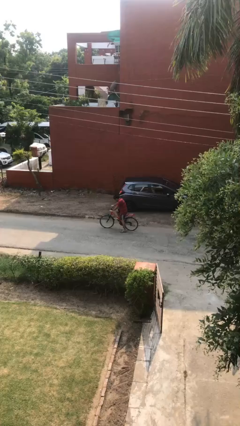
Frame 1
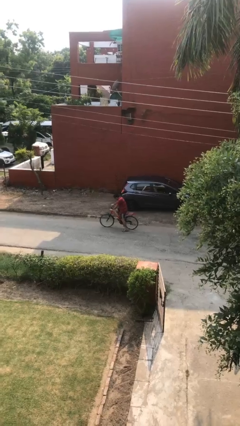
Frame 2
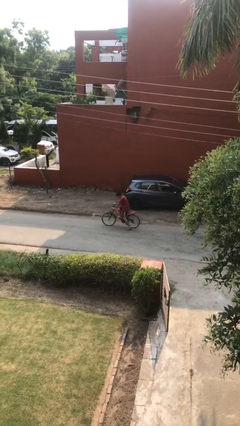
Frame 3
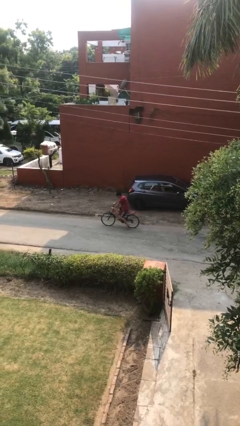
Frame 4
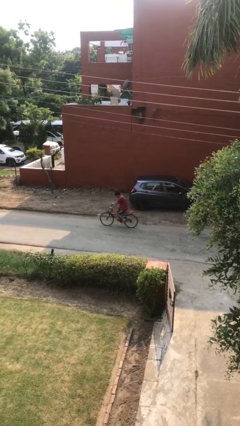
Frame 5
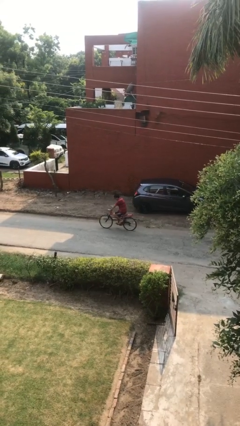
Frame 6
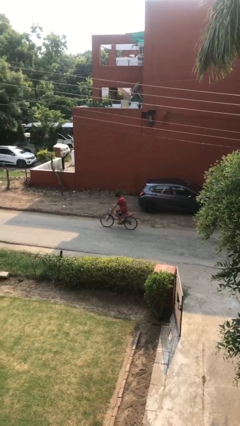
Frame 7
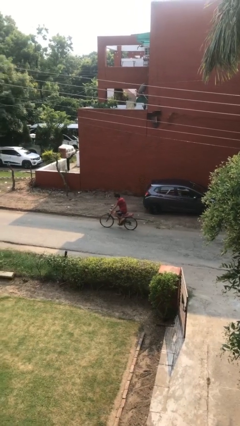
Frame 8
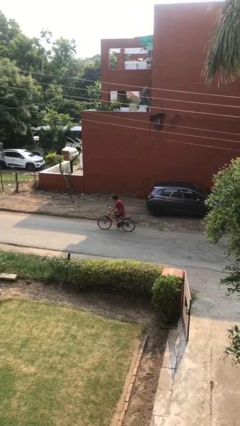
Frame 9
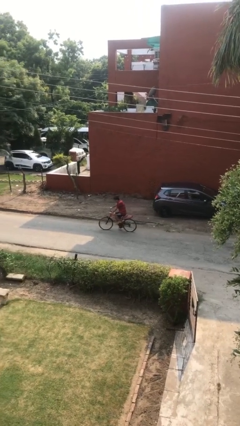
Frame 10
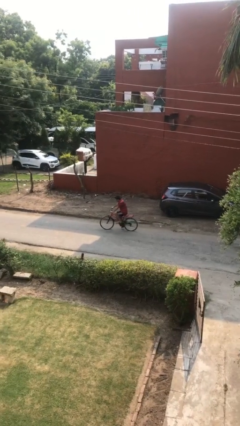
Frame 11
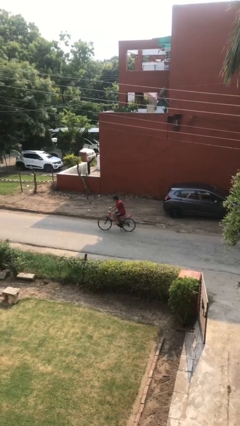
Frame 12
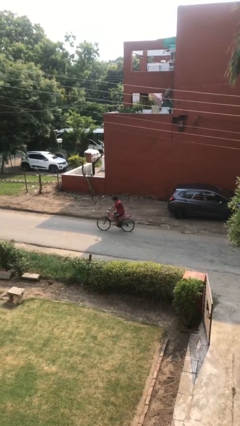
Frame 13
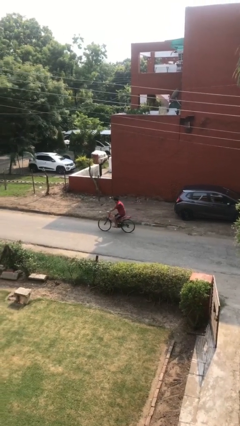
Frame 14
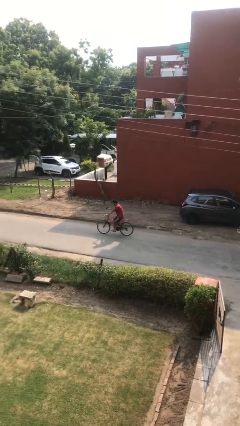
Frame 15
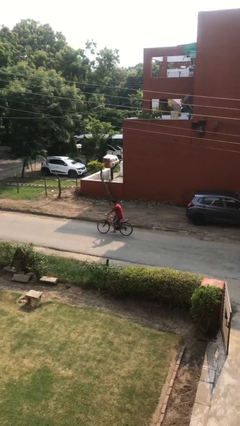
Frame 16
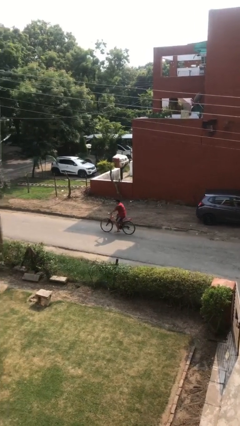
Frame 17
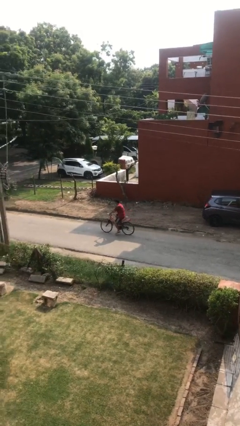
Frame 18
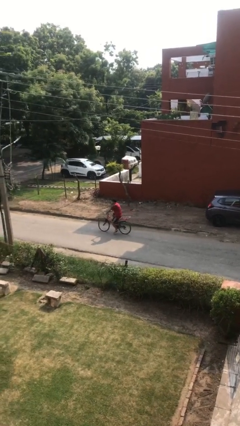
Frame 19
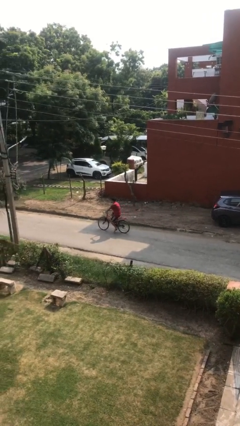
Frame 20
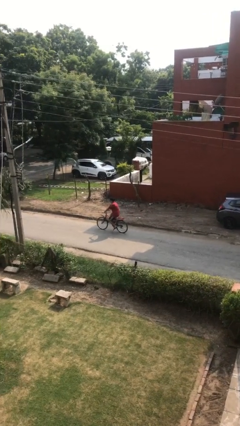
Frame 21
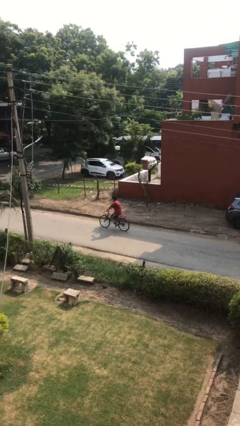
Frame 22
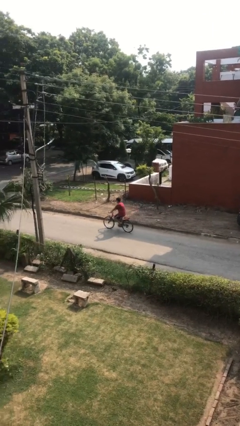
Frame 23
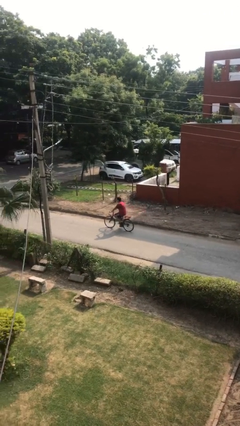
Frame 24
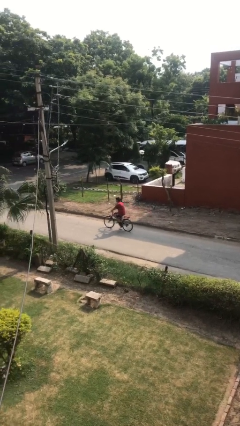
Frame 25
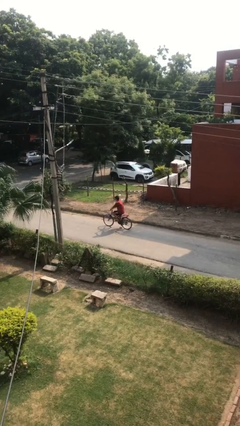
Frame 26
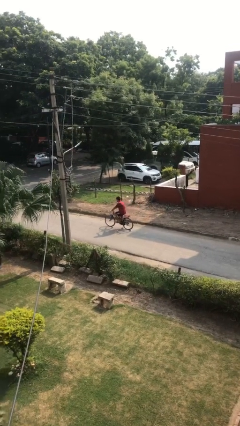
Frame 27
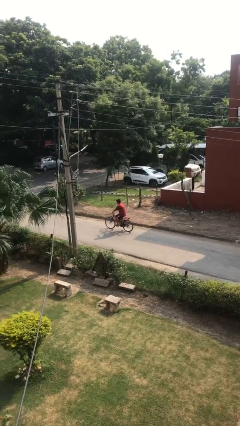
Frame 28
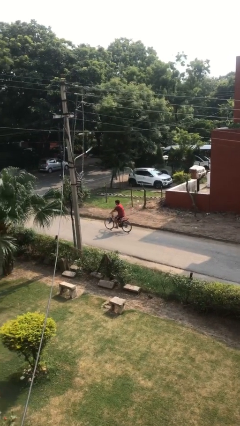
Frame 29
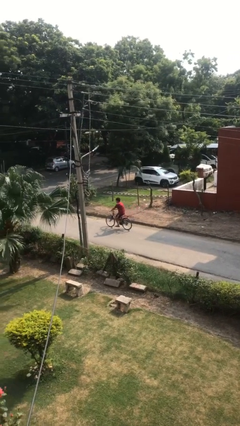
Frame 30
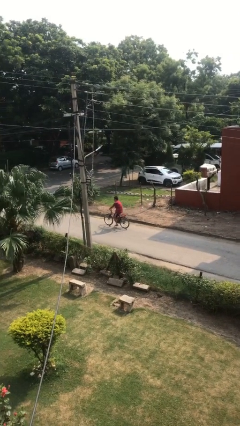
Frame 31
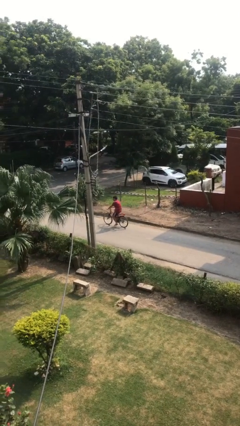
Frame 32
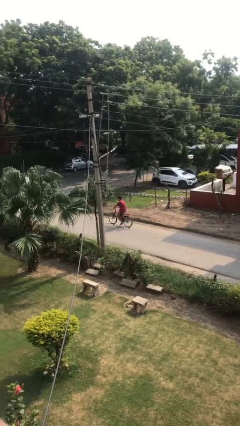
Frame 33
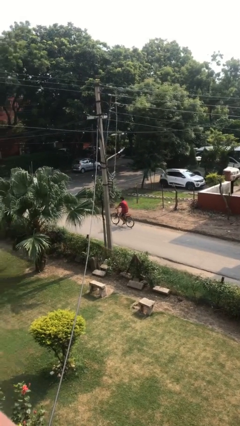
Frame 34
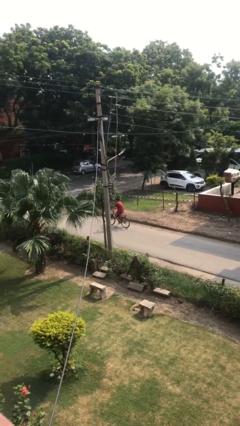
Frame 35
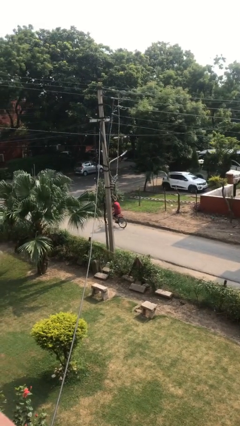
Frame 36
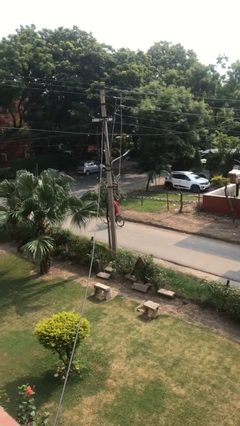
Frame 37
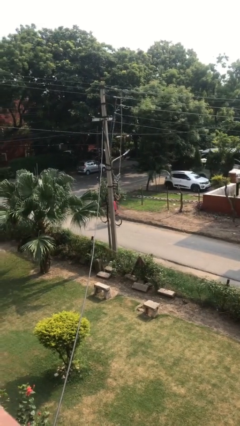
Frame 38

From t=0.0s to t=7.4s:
person rides bicycle

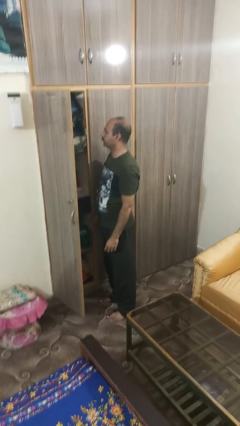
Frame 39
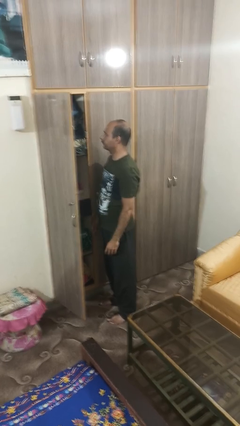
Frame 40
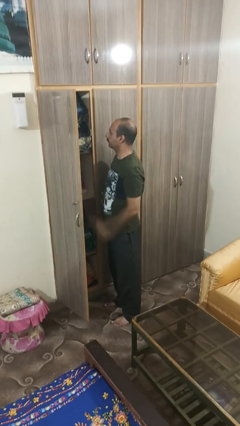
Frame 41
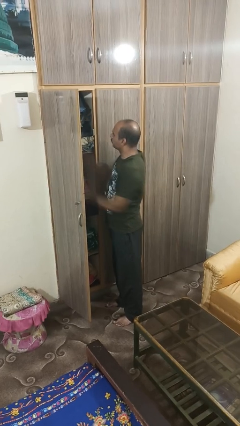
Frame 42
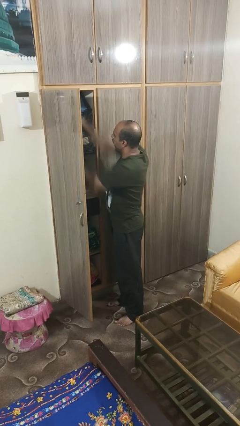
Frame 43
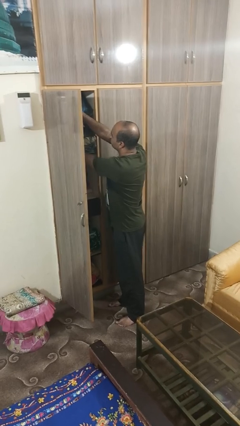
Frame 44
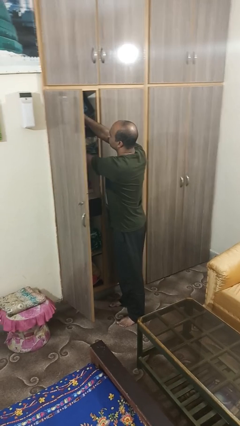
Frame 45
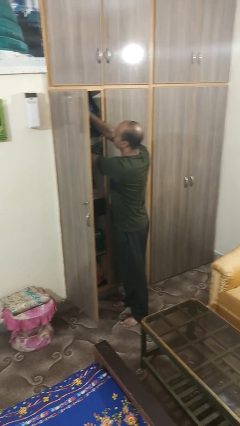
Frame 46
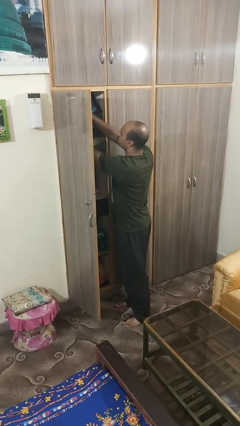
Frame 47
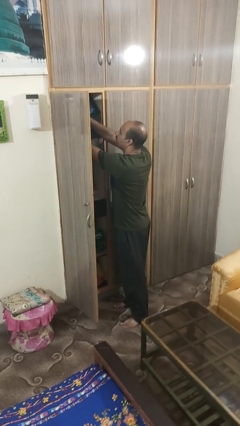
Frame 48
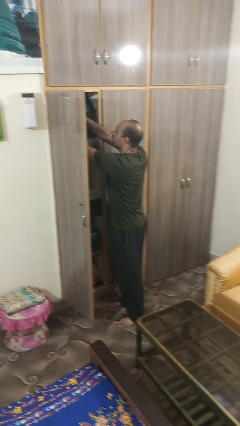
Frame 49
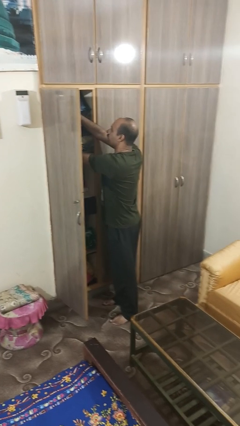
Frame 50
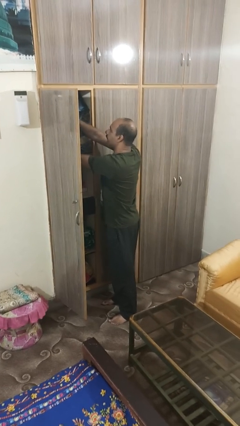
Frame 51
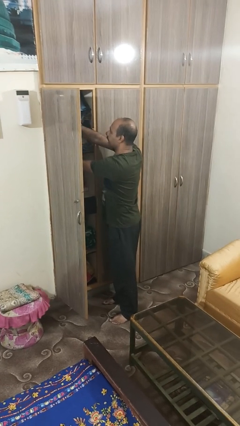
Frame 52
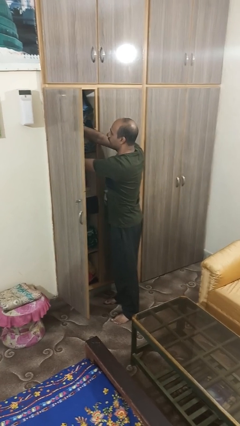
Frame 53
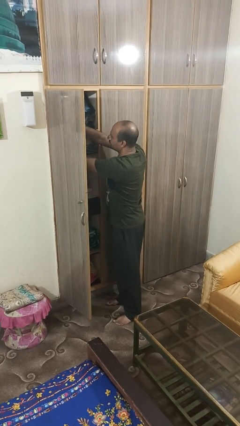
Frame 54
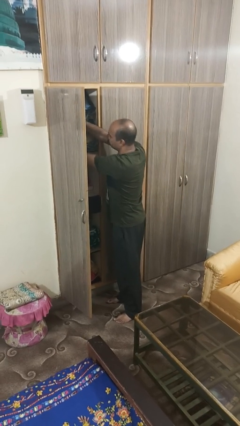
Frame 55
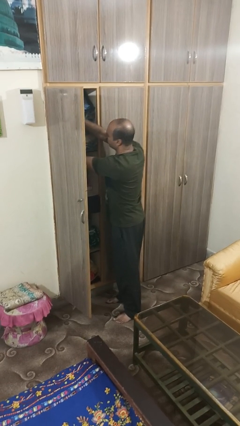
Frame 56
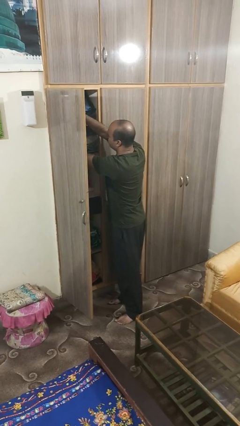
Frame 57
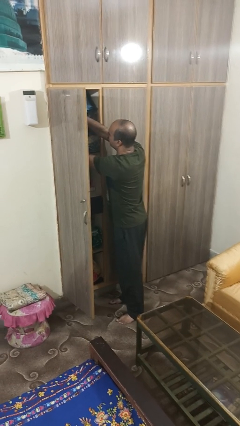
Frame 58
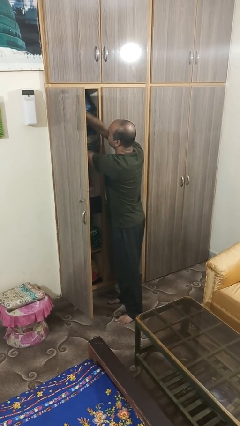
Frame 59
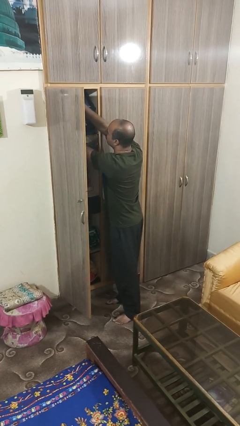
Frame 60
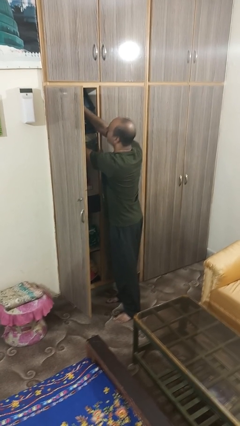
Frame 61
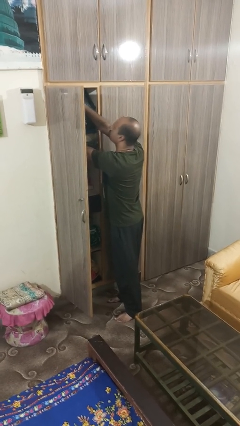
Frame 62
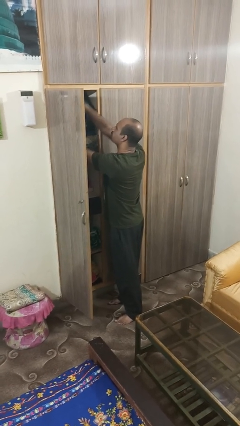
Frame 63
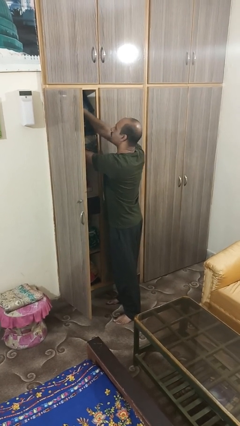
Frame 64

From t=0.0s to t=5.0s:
person searches in cabinet

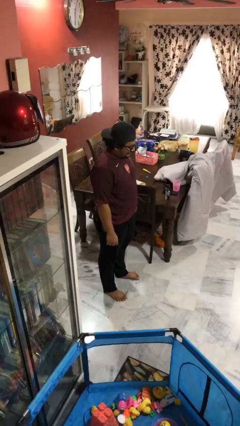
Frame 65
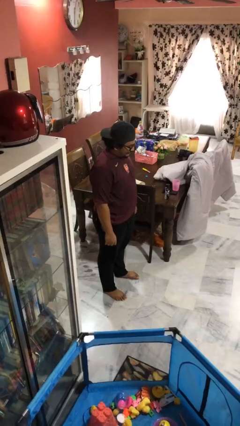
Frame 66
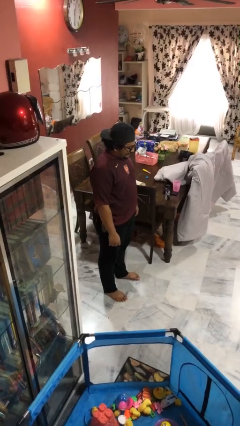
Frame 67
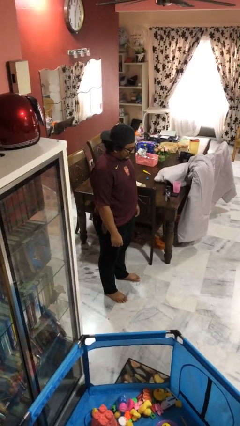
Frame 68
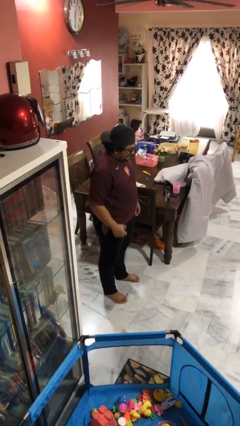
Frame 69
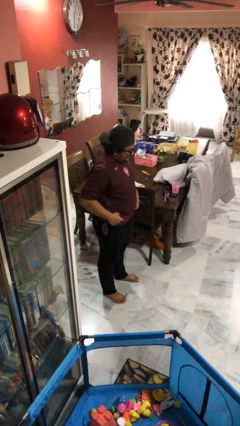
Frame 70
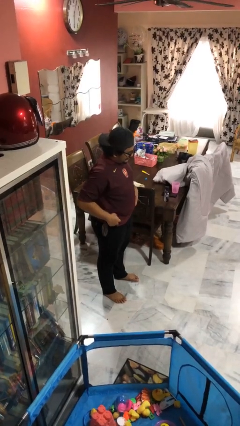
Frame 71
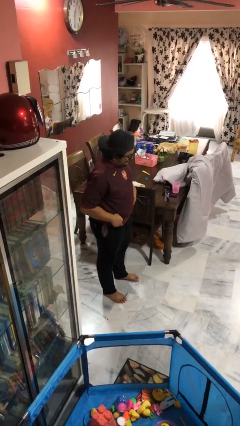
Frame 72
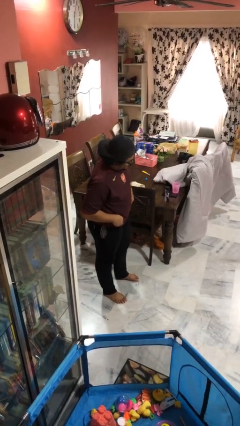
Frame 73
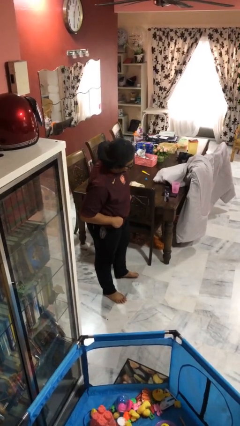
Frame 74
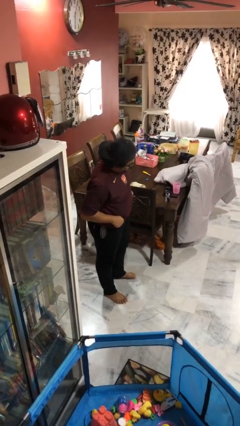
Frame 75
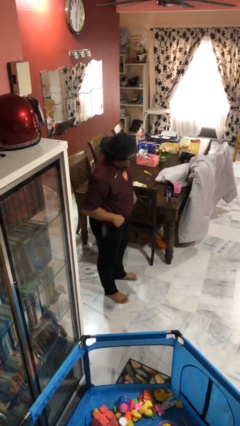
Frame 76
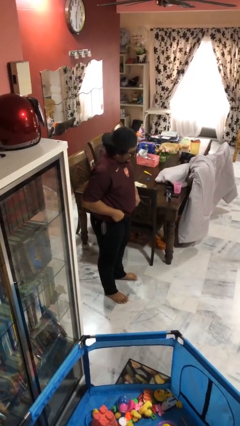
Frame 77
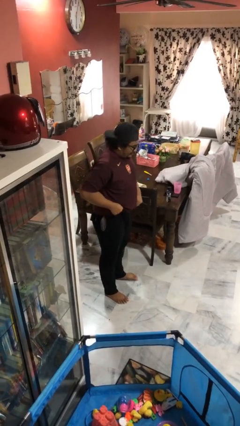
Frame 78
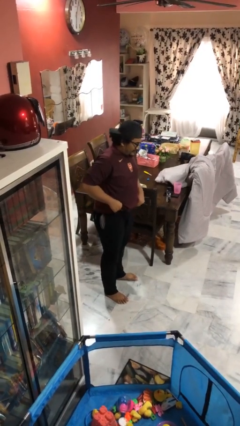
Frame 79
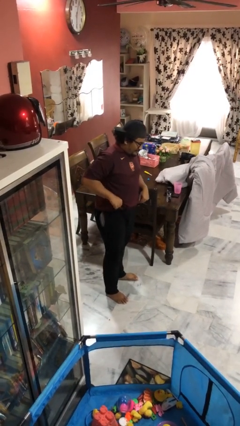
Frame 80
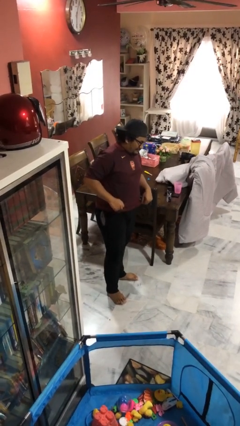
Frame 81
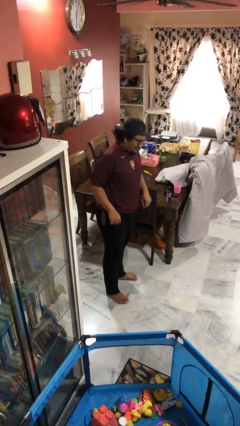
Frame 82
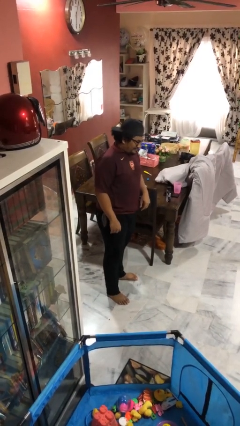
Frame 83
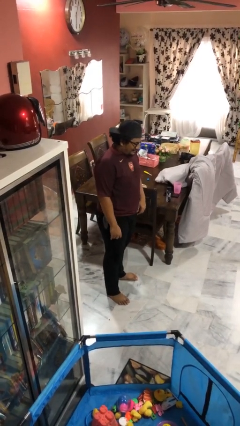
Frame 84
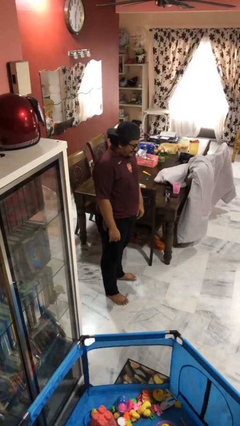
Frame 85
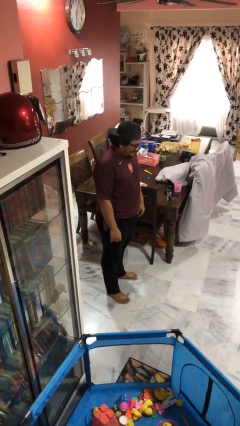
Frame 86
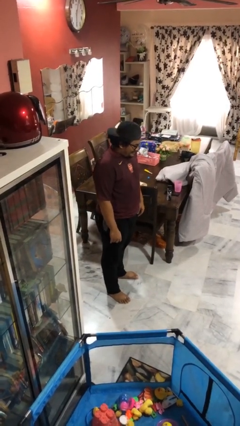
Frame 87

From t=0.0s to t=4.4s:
person hikes up pants

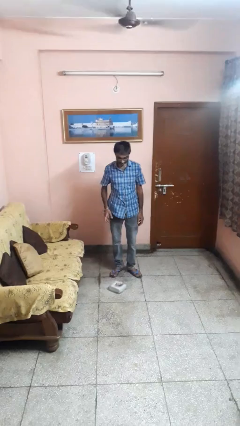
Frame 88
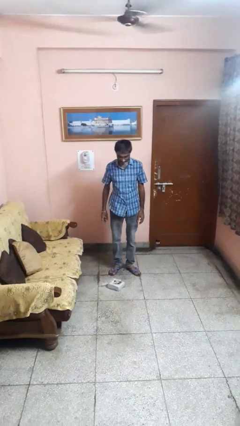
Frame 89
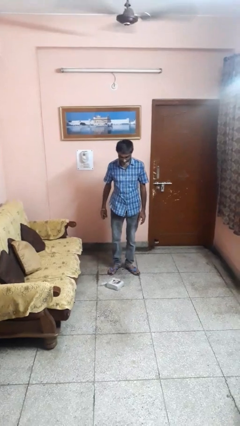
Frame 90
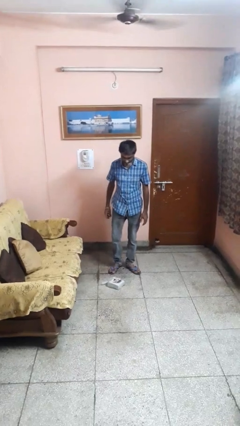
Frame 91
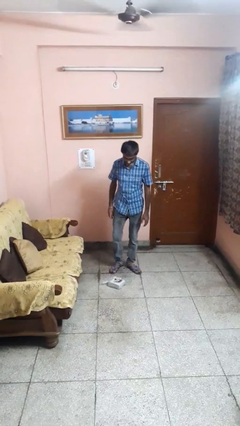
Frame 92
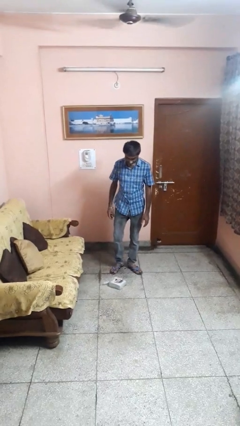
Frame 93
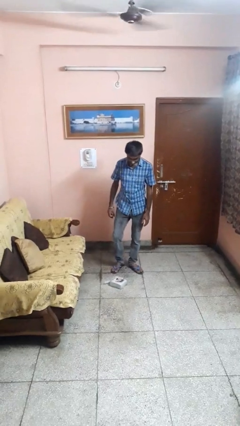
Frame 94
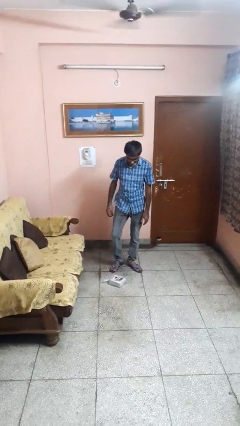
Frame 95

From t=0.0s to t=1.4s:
person drops object
